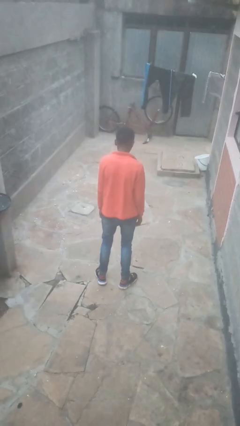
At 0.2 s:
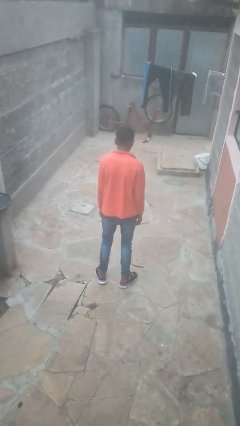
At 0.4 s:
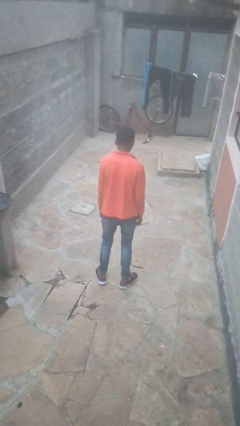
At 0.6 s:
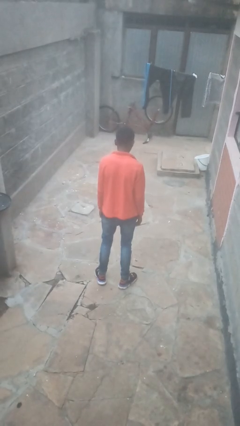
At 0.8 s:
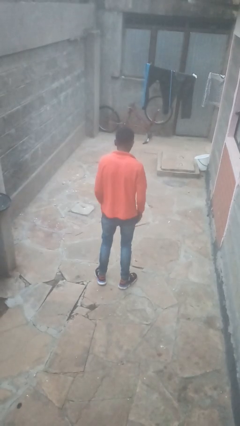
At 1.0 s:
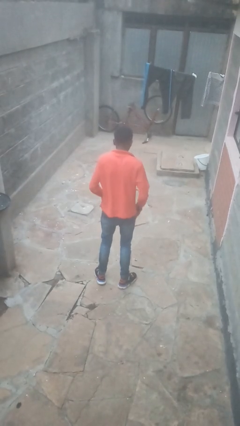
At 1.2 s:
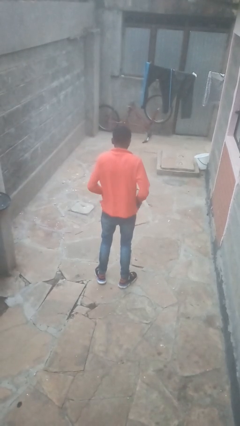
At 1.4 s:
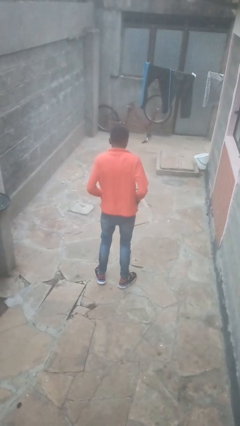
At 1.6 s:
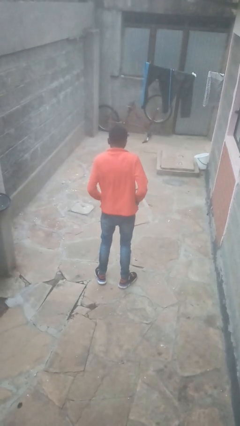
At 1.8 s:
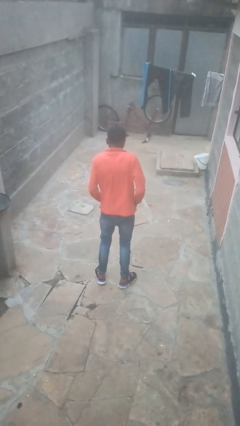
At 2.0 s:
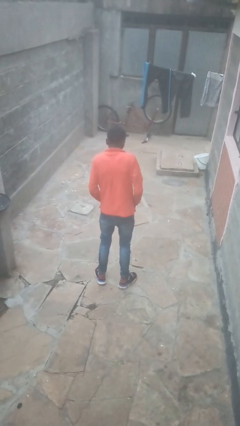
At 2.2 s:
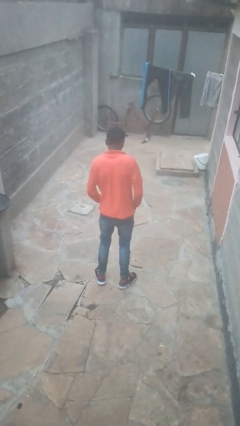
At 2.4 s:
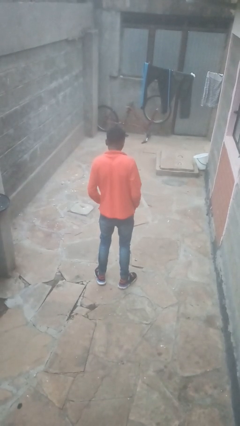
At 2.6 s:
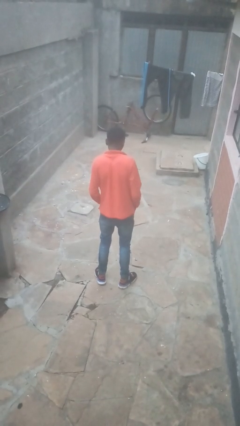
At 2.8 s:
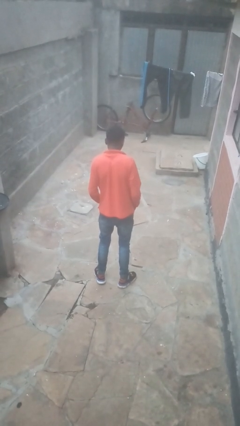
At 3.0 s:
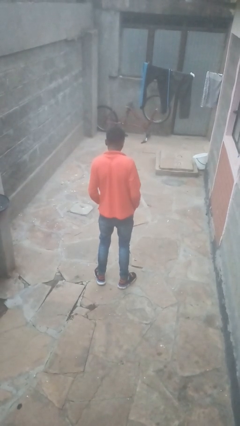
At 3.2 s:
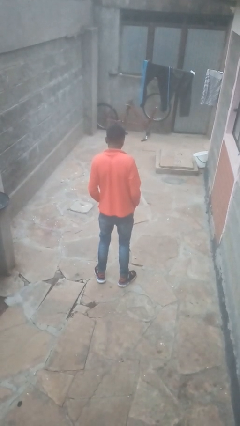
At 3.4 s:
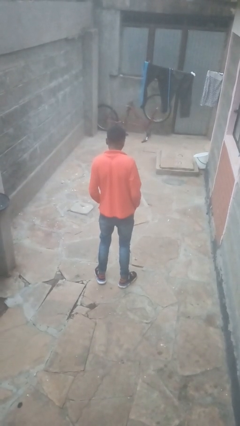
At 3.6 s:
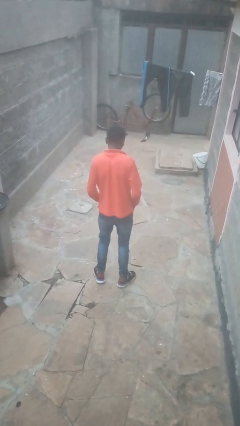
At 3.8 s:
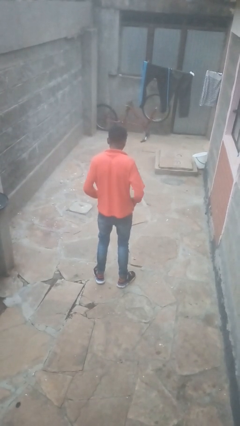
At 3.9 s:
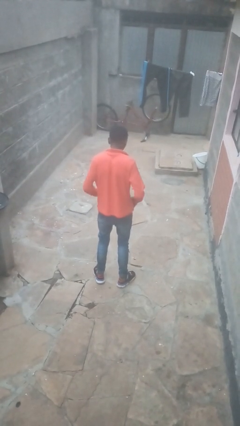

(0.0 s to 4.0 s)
person puts hands in back pockets

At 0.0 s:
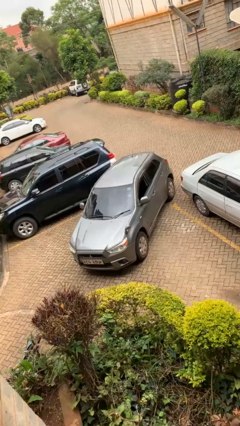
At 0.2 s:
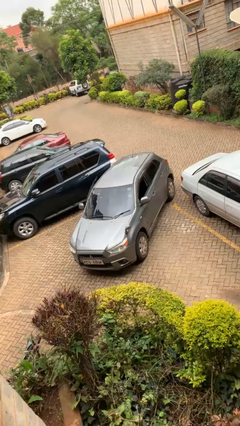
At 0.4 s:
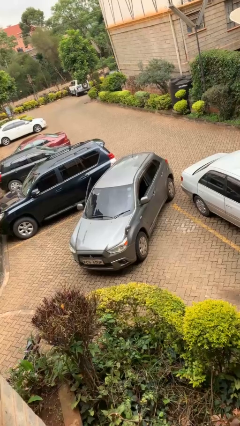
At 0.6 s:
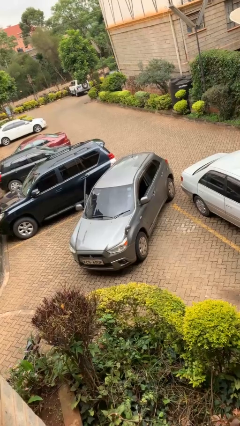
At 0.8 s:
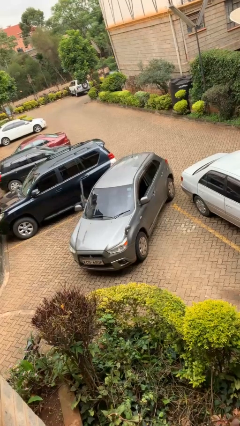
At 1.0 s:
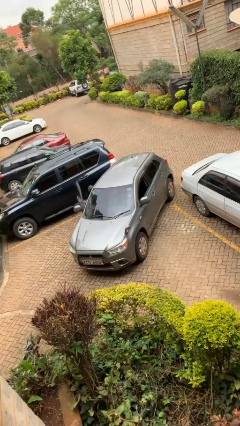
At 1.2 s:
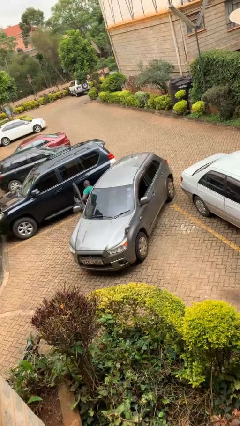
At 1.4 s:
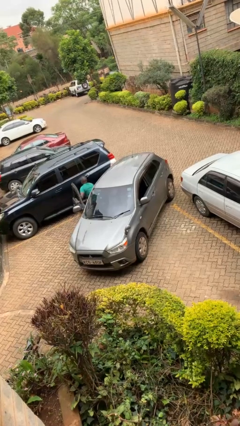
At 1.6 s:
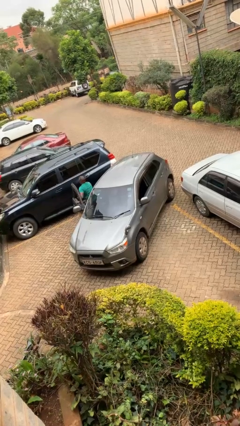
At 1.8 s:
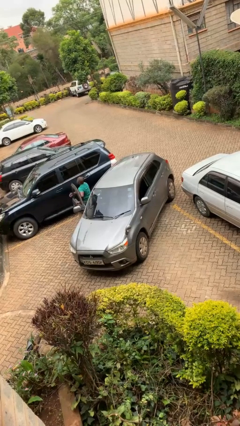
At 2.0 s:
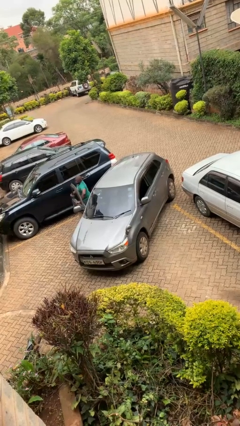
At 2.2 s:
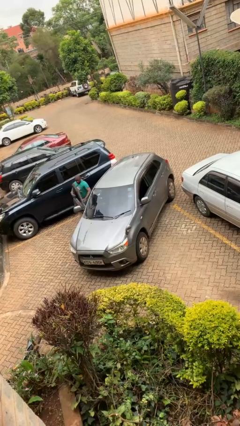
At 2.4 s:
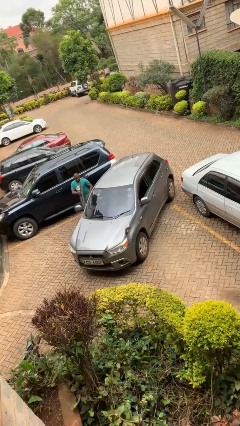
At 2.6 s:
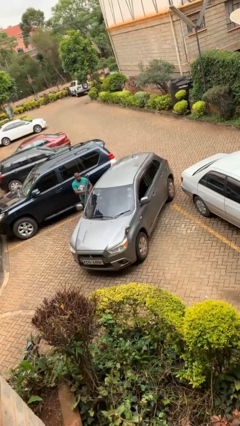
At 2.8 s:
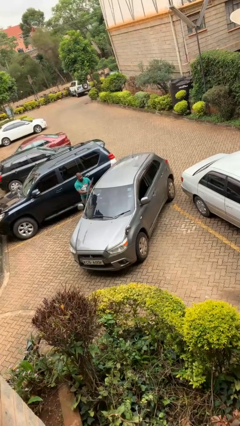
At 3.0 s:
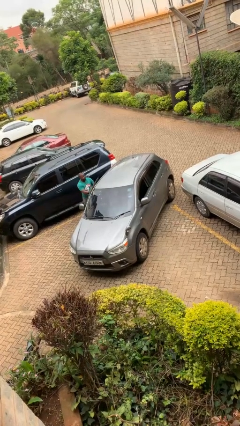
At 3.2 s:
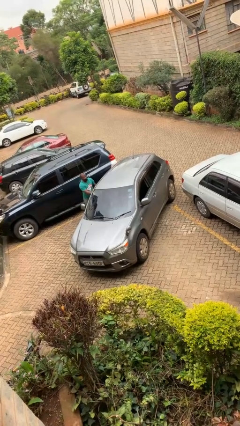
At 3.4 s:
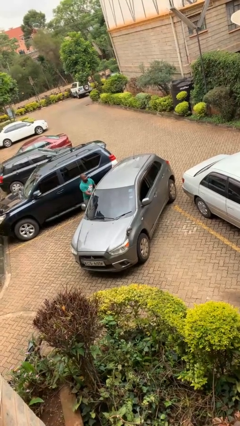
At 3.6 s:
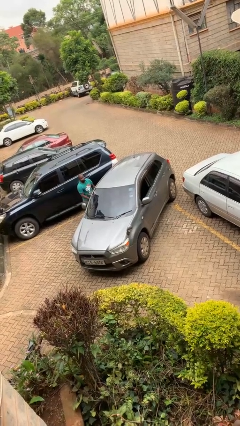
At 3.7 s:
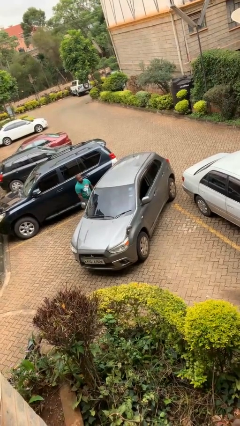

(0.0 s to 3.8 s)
car drops off person

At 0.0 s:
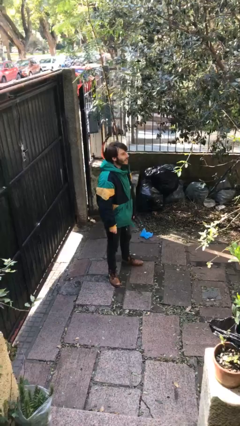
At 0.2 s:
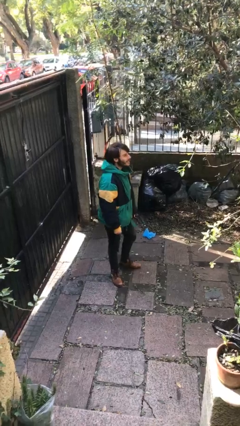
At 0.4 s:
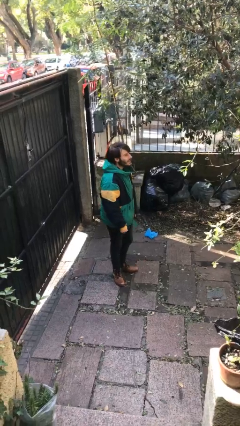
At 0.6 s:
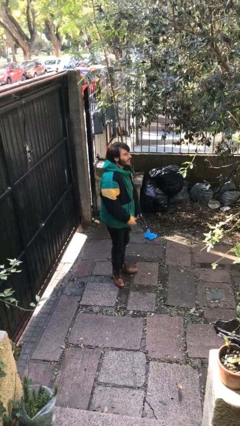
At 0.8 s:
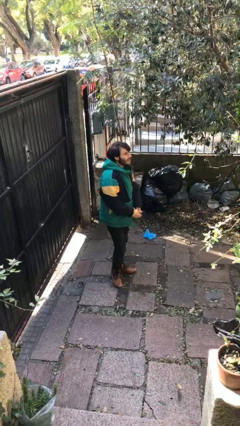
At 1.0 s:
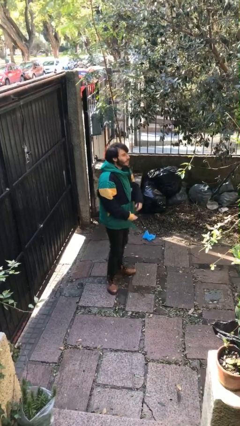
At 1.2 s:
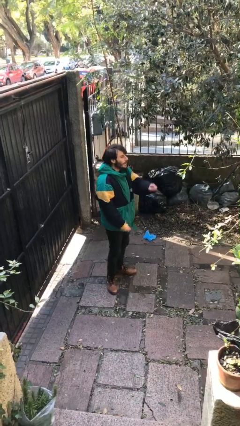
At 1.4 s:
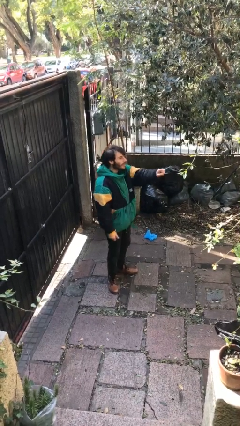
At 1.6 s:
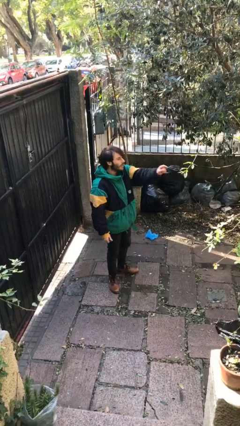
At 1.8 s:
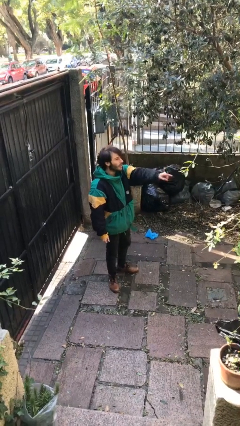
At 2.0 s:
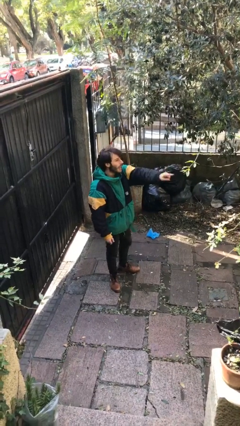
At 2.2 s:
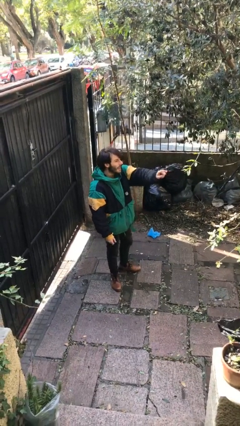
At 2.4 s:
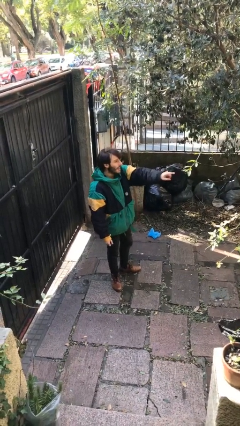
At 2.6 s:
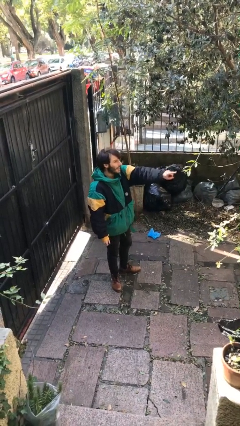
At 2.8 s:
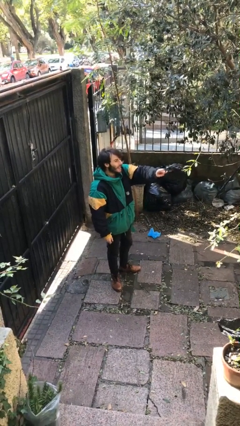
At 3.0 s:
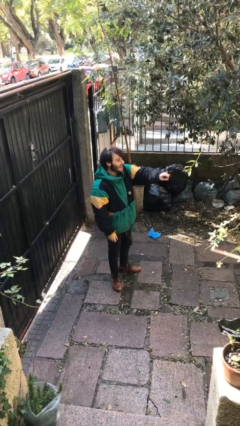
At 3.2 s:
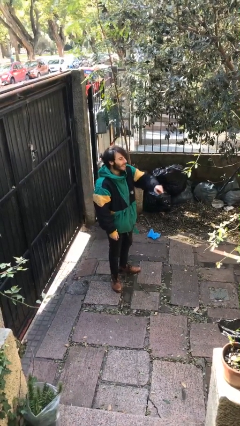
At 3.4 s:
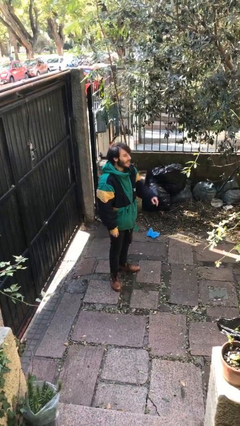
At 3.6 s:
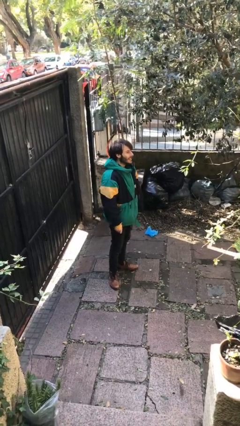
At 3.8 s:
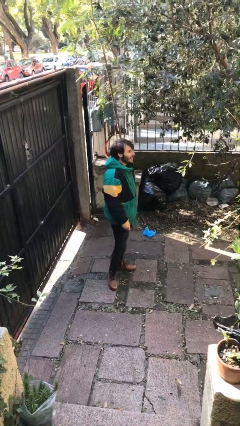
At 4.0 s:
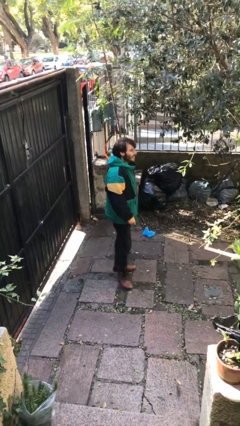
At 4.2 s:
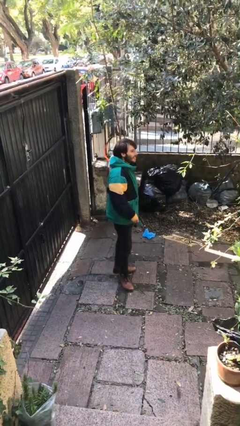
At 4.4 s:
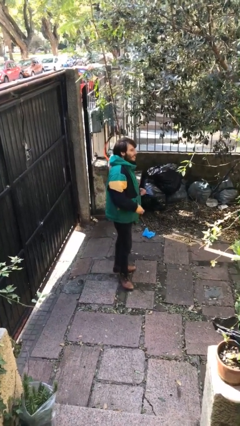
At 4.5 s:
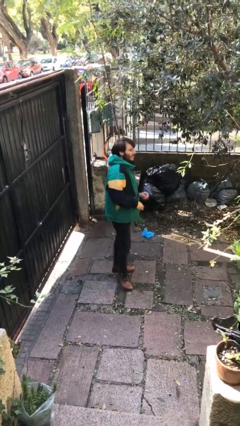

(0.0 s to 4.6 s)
person points at person

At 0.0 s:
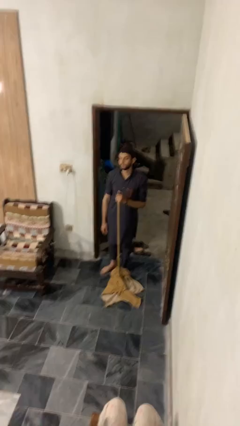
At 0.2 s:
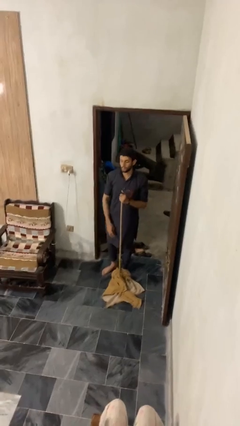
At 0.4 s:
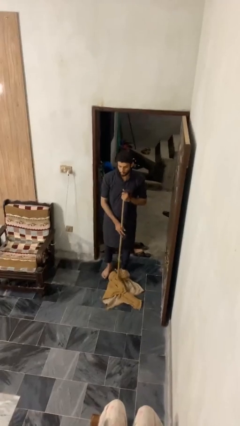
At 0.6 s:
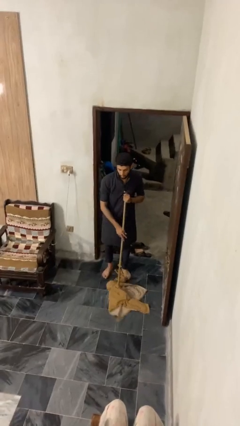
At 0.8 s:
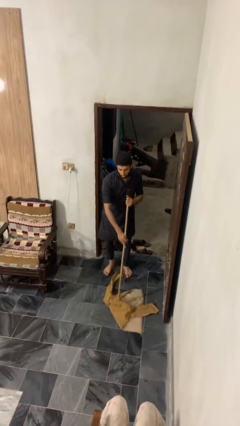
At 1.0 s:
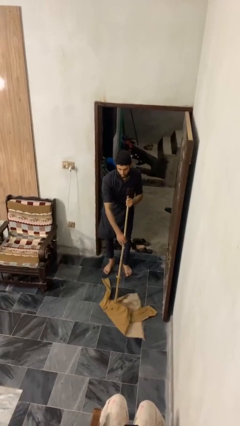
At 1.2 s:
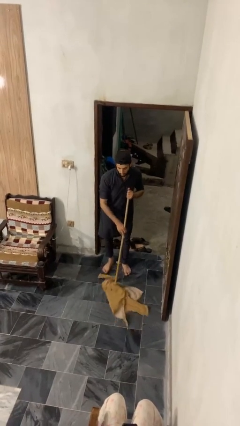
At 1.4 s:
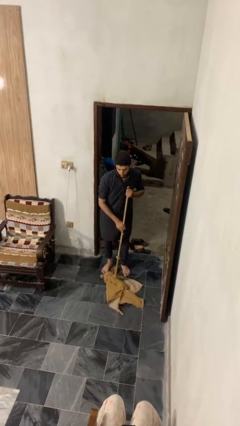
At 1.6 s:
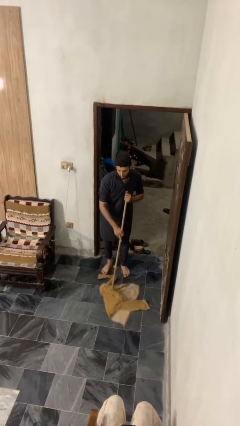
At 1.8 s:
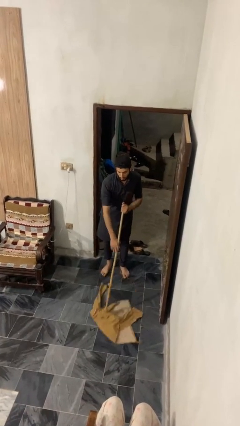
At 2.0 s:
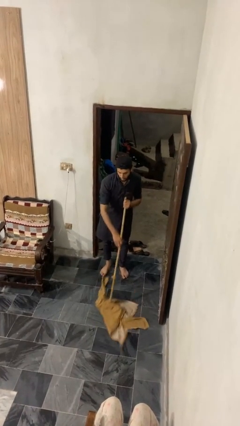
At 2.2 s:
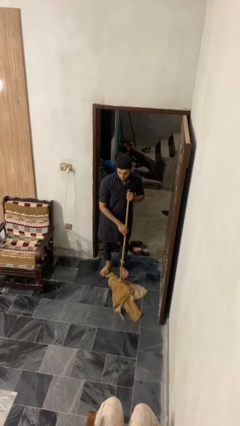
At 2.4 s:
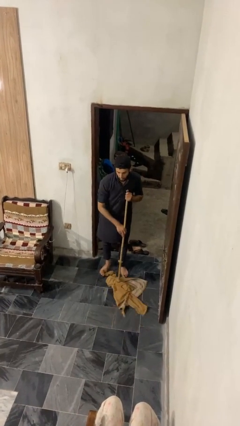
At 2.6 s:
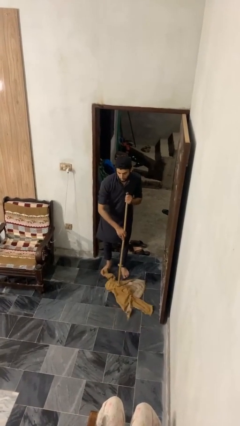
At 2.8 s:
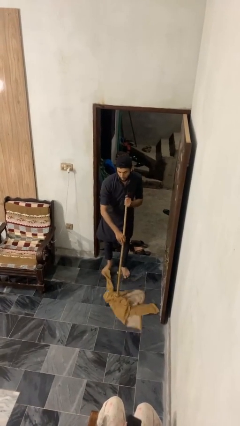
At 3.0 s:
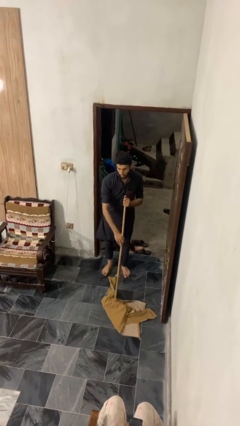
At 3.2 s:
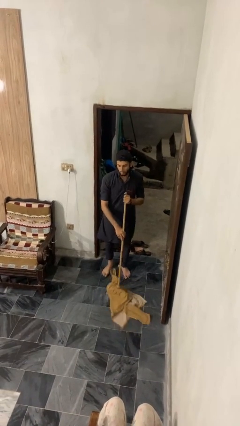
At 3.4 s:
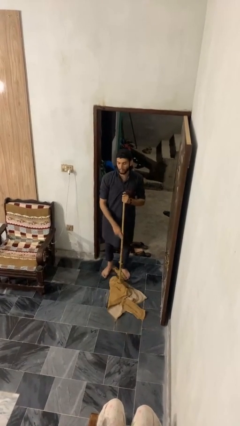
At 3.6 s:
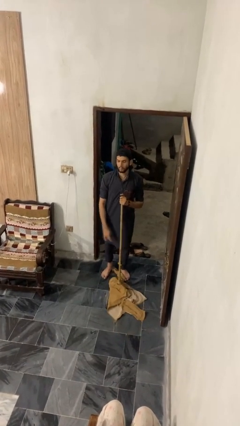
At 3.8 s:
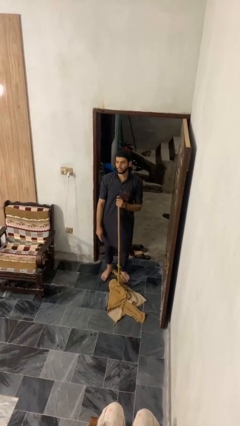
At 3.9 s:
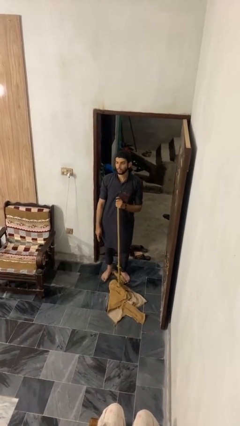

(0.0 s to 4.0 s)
person mops

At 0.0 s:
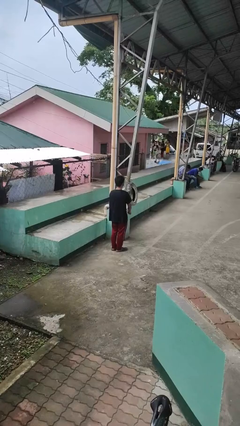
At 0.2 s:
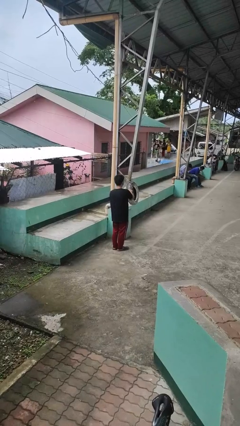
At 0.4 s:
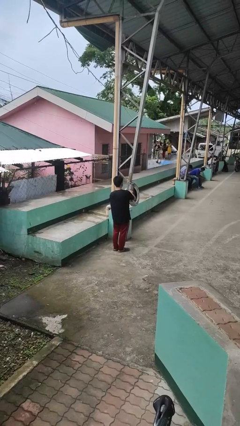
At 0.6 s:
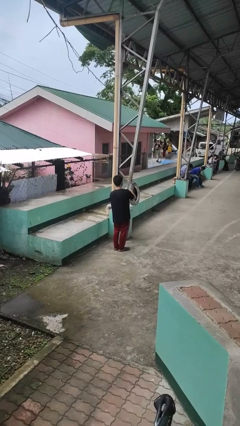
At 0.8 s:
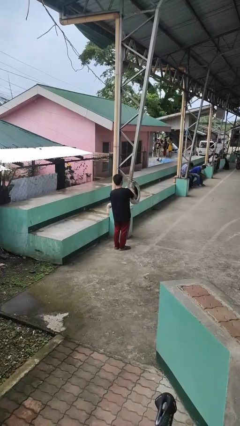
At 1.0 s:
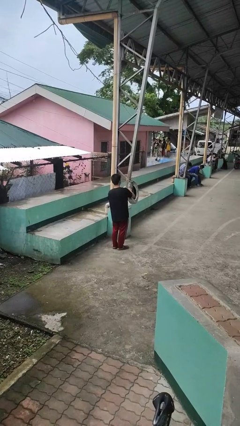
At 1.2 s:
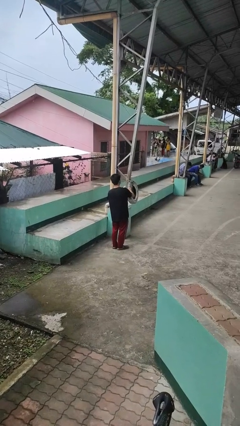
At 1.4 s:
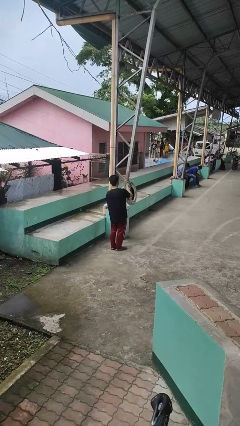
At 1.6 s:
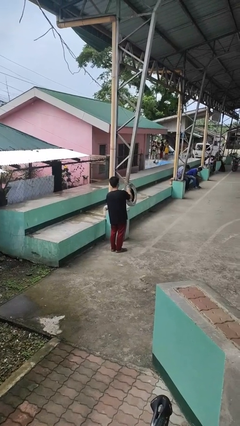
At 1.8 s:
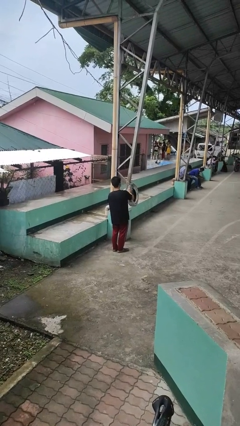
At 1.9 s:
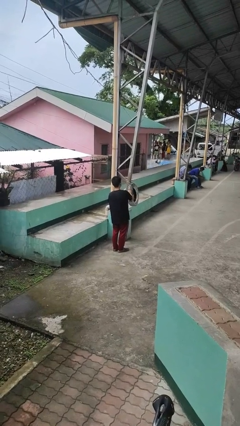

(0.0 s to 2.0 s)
person taps object with finger
